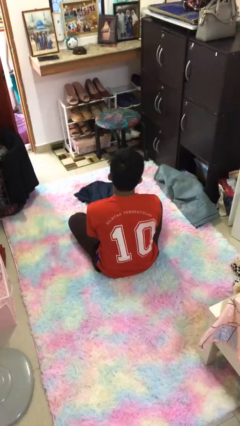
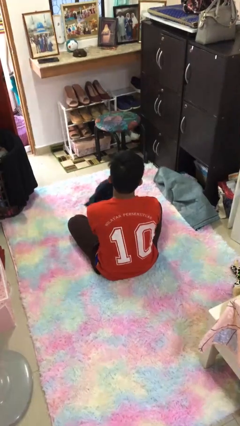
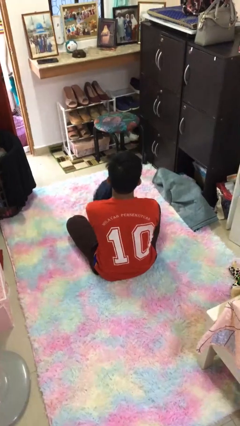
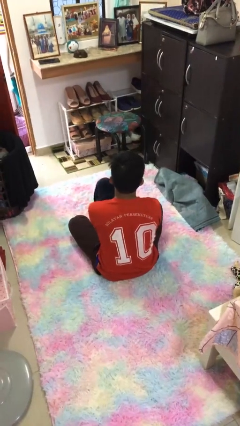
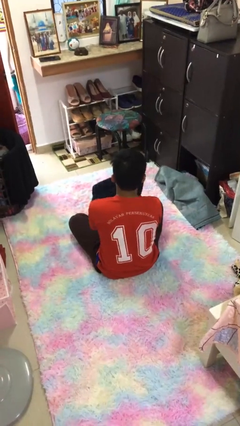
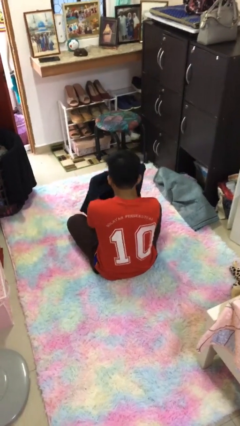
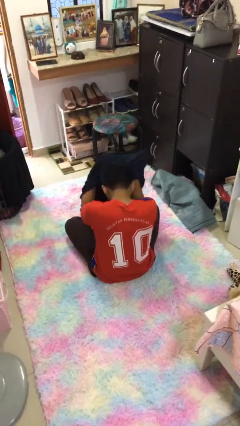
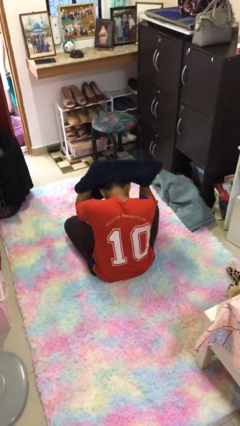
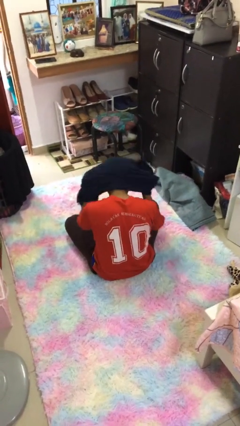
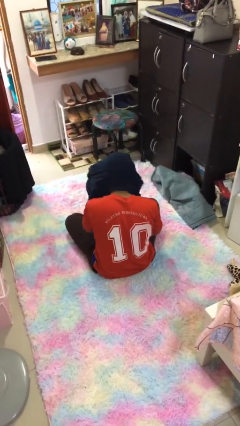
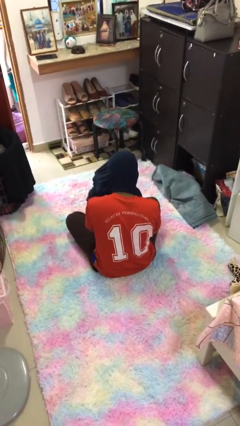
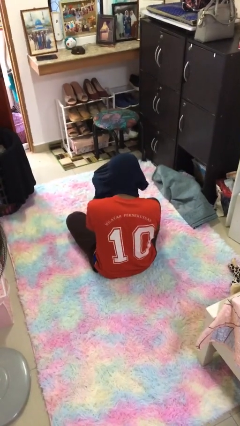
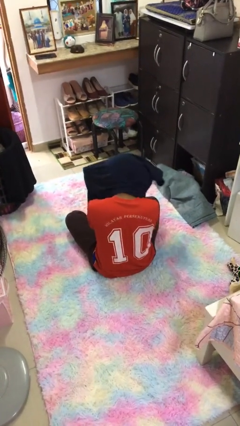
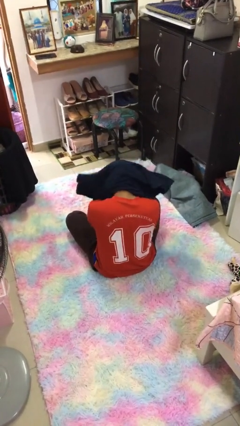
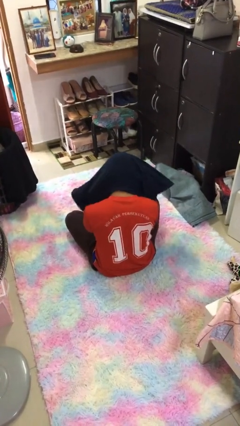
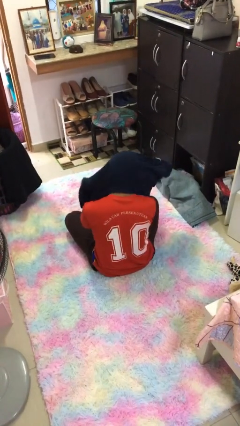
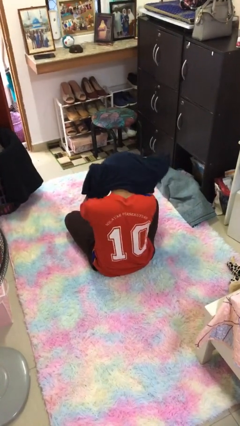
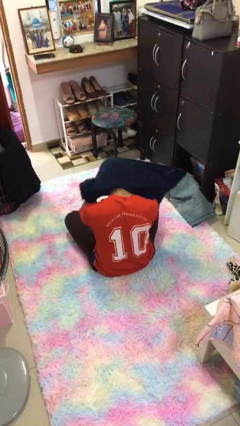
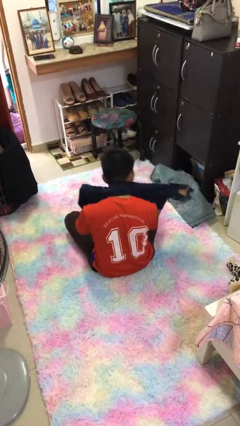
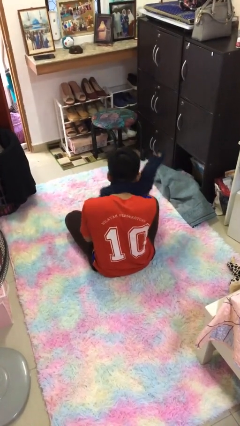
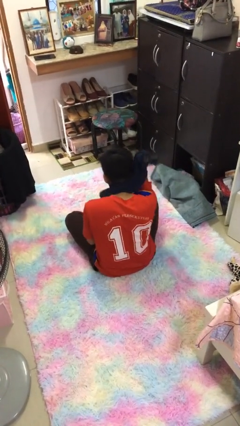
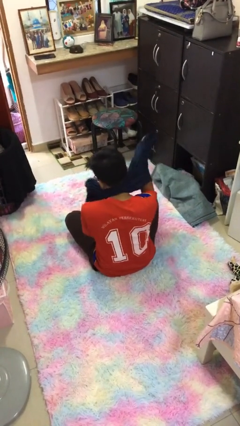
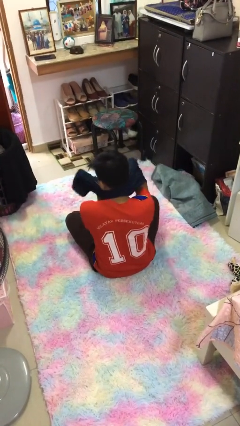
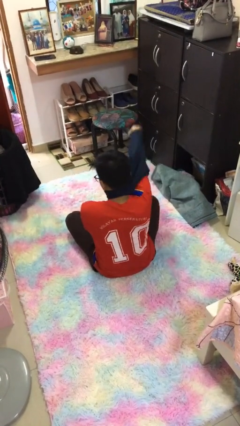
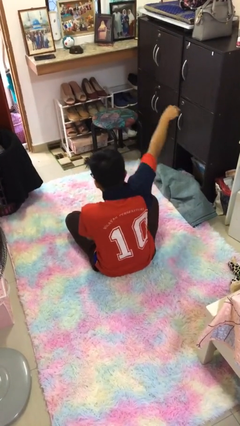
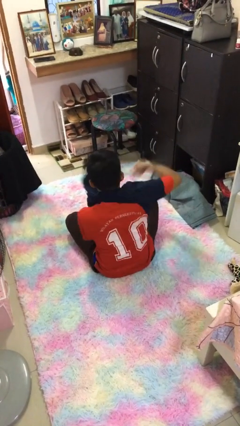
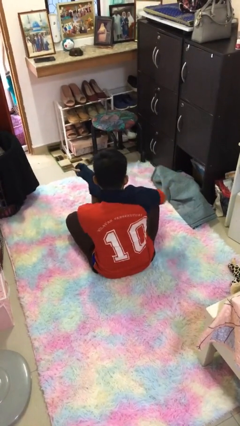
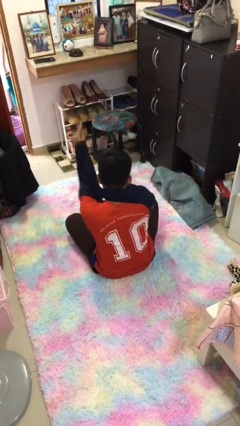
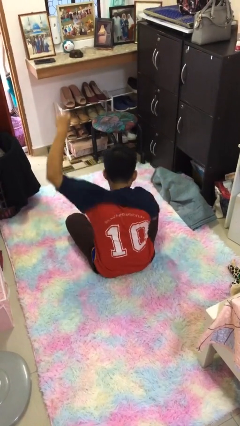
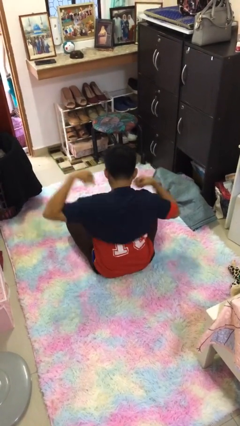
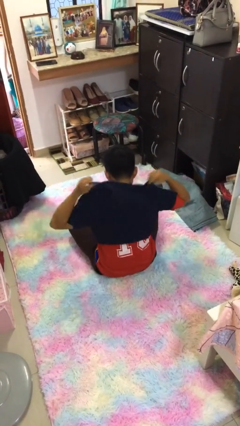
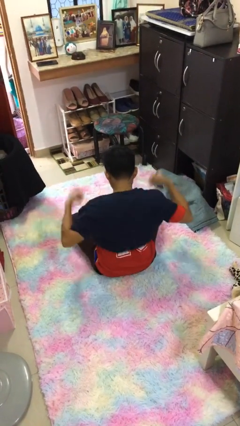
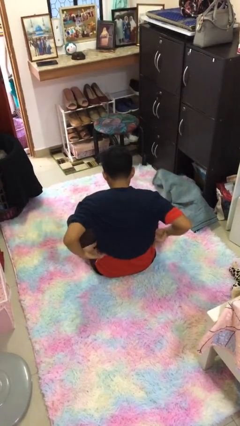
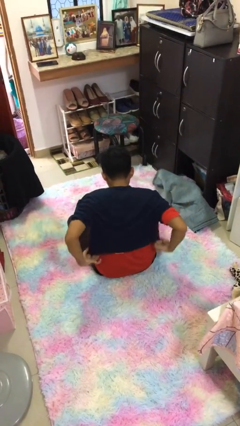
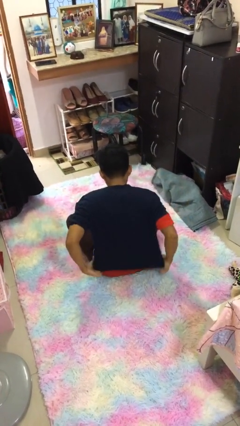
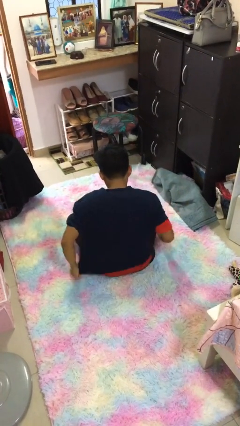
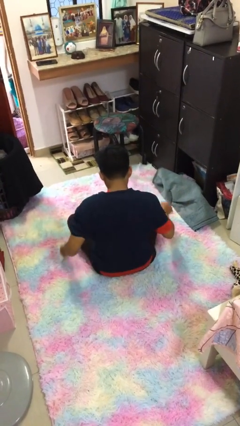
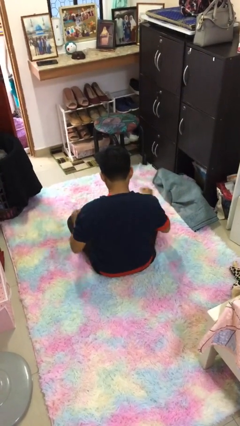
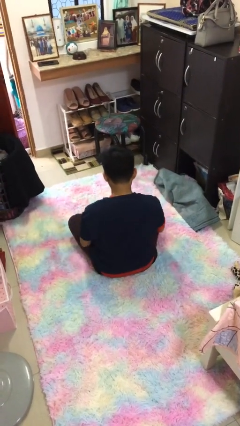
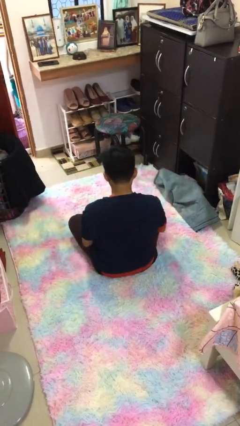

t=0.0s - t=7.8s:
person puts on shirt

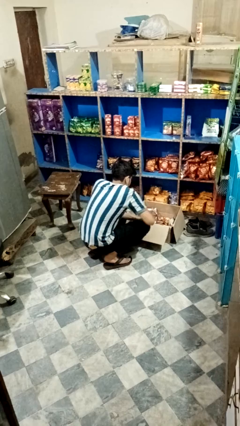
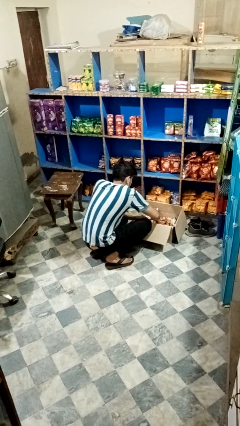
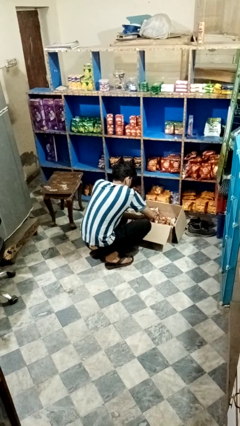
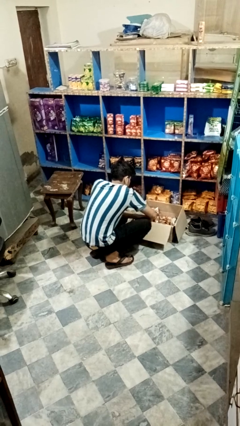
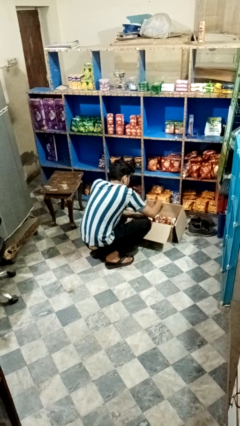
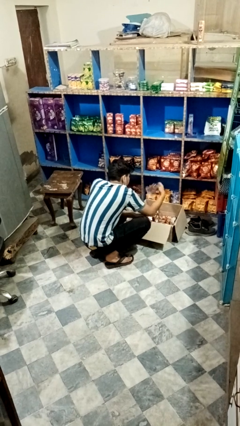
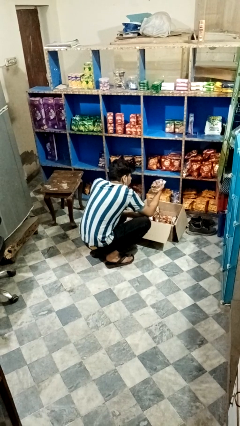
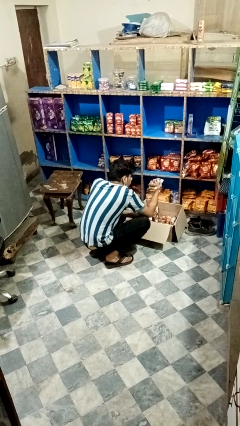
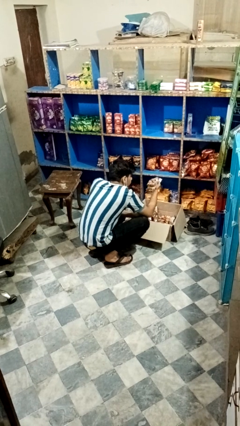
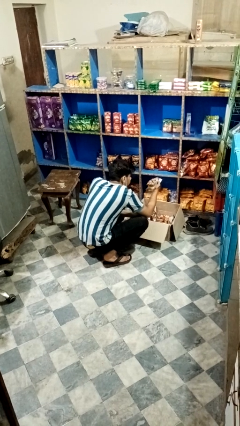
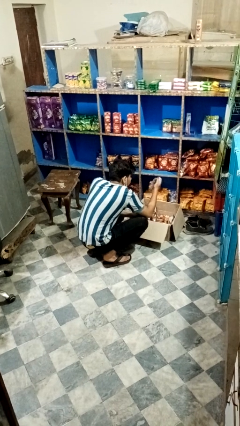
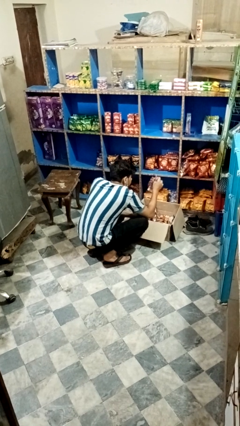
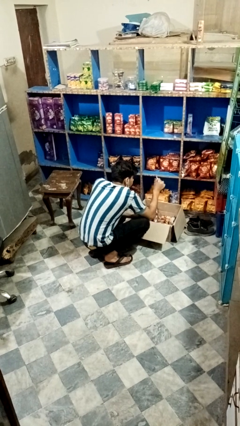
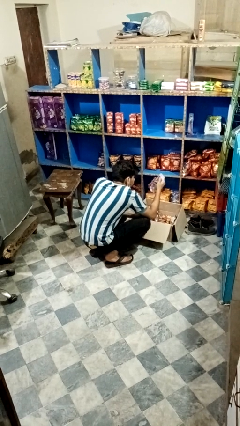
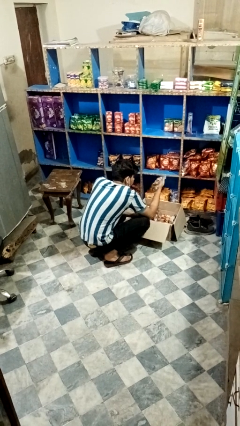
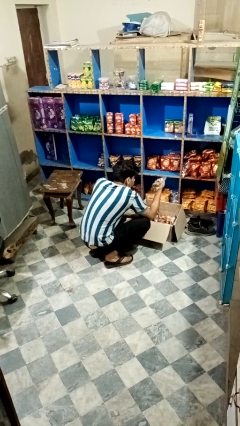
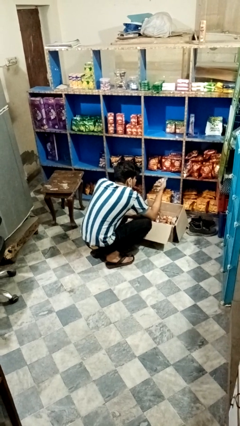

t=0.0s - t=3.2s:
person searches in box

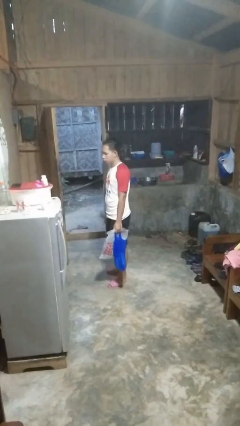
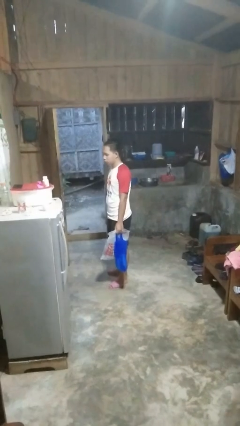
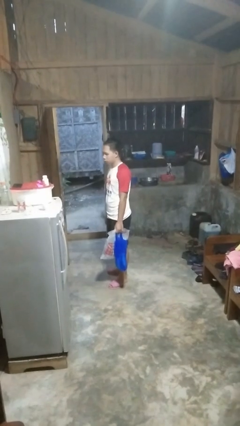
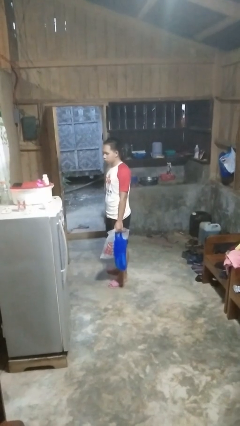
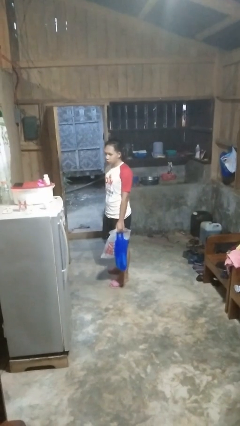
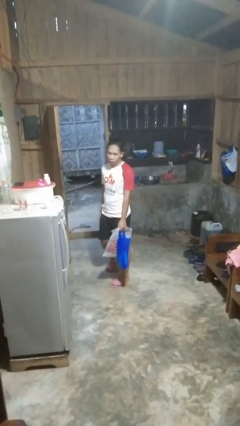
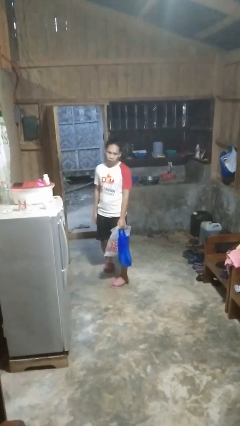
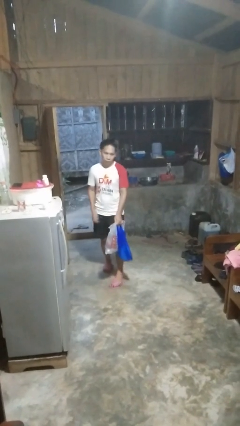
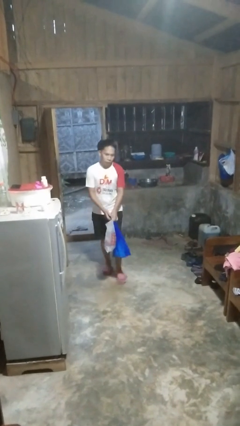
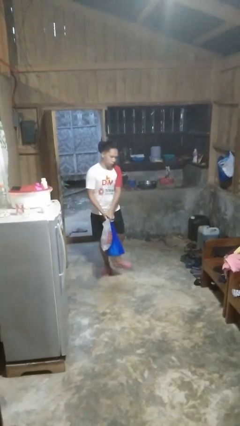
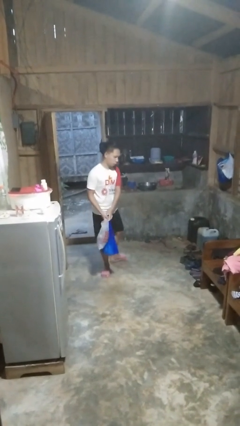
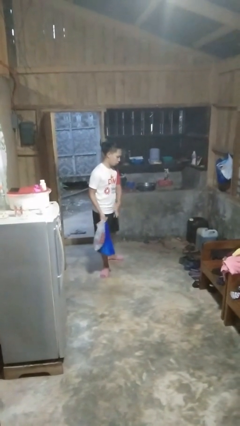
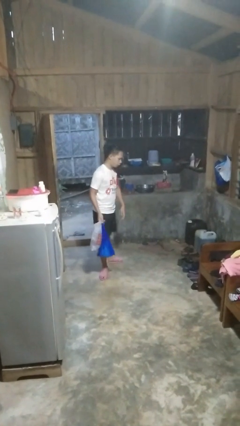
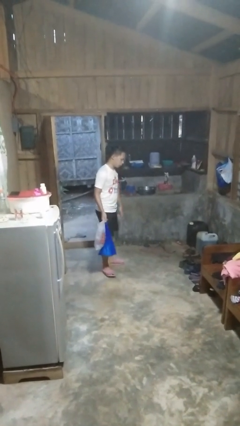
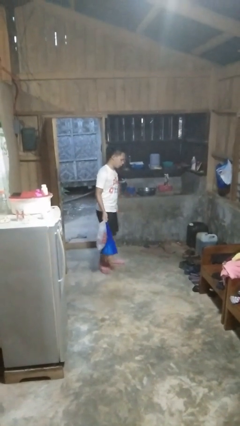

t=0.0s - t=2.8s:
person carries groceries

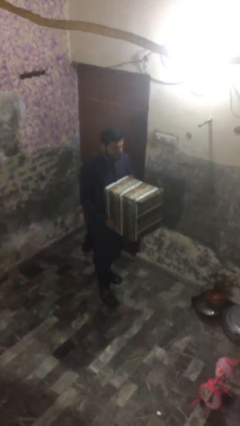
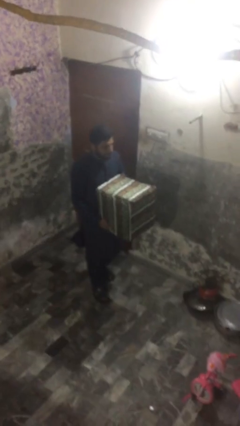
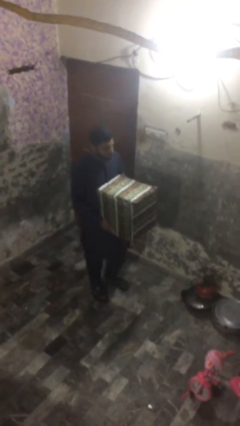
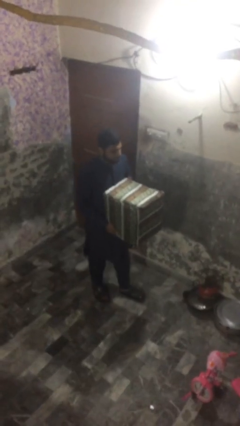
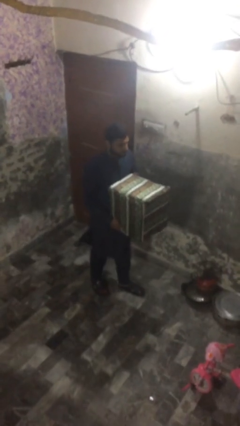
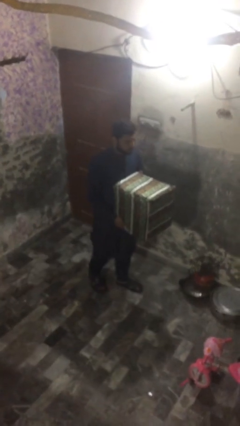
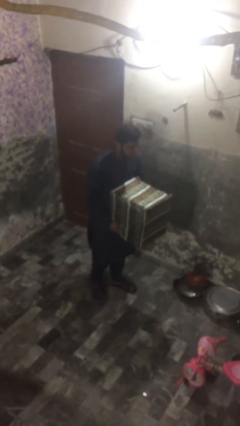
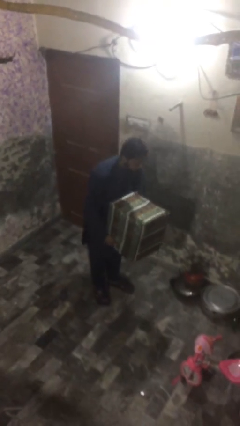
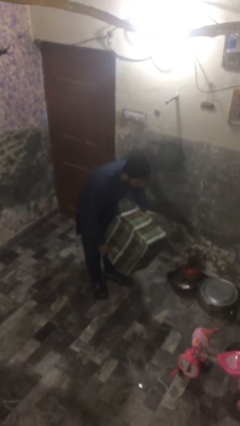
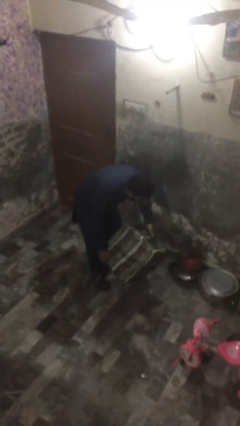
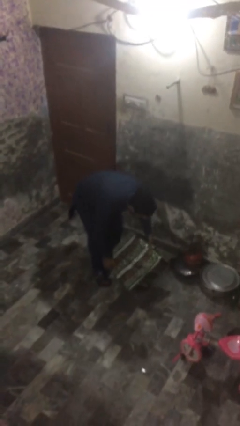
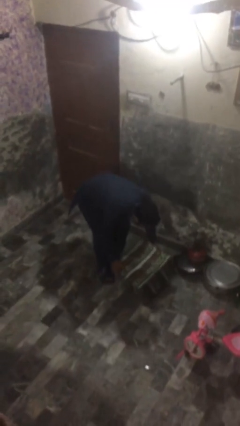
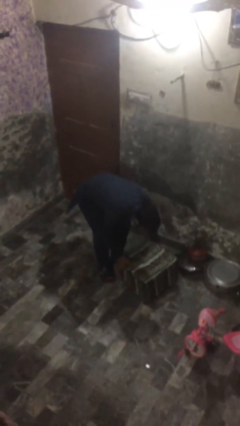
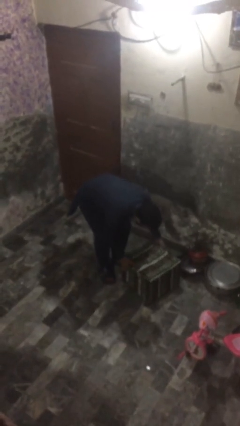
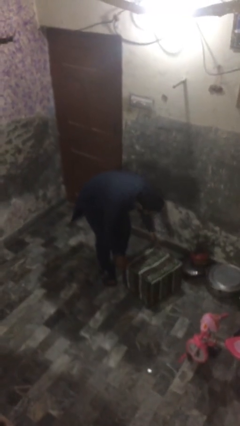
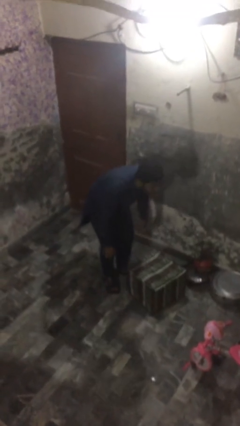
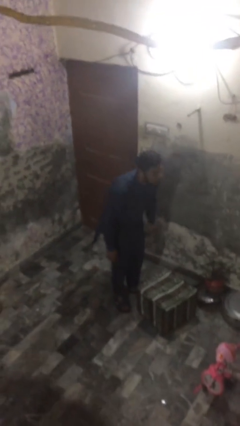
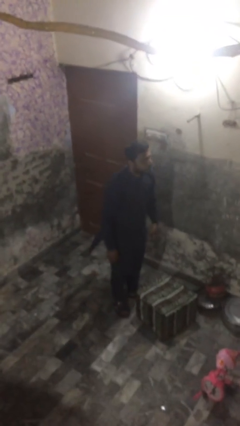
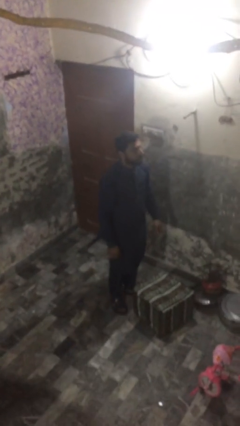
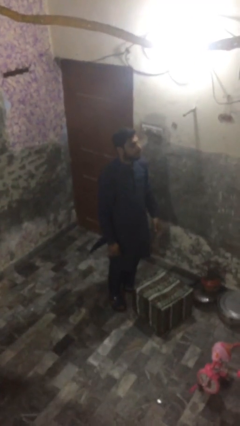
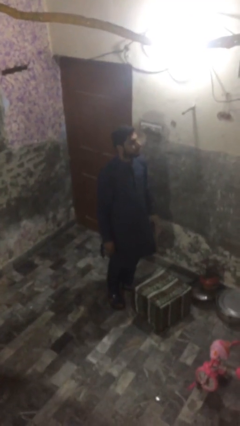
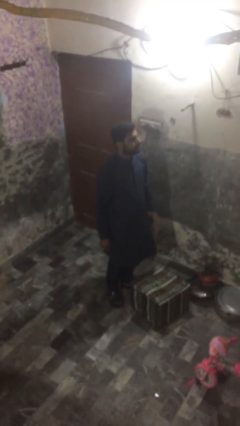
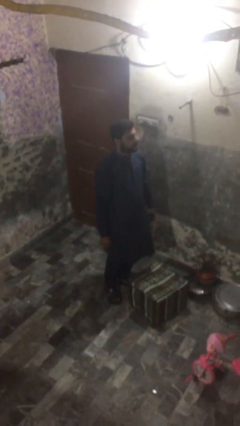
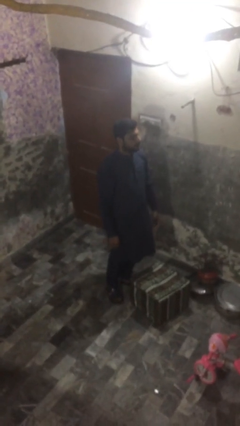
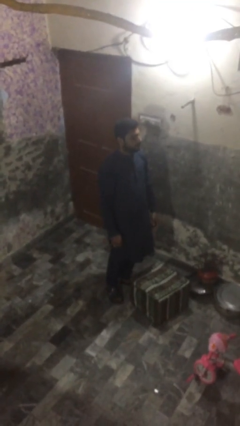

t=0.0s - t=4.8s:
person puts down object on floor
